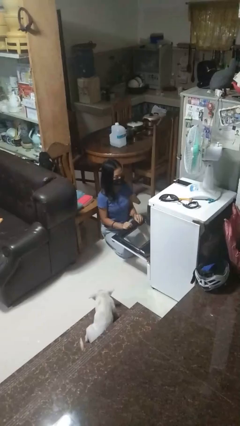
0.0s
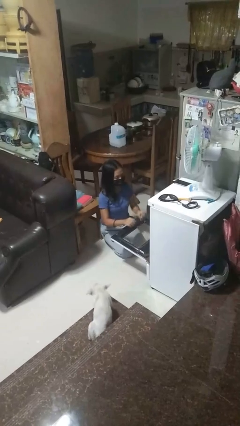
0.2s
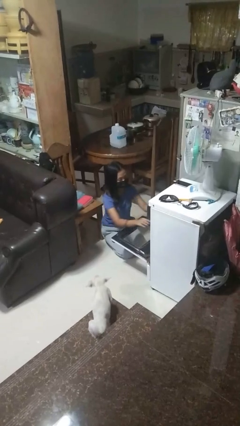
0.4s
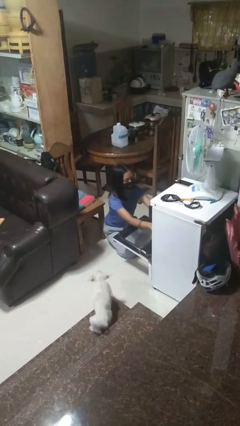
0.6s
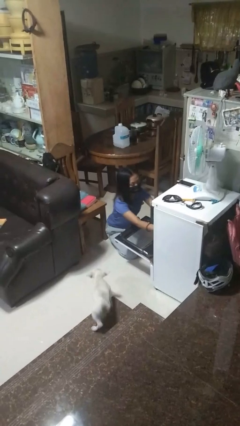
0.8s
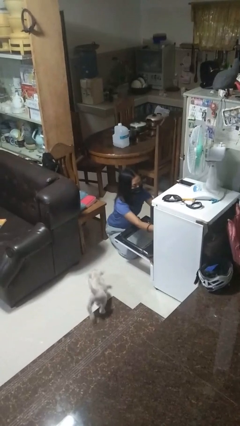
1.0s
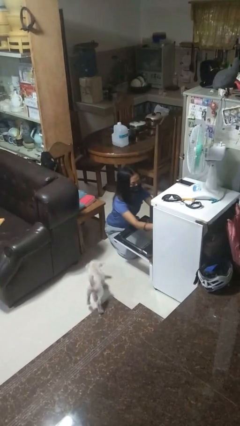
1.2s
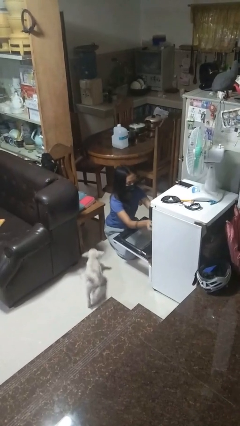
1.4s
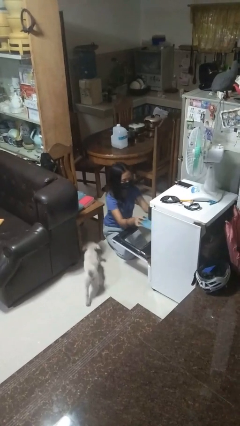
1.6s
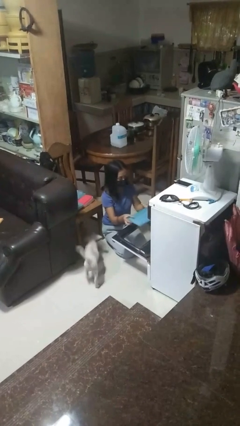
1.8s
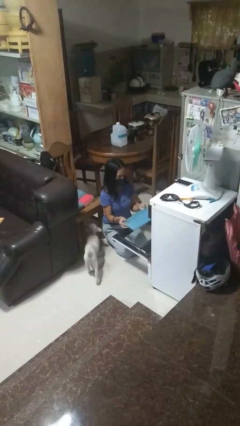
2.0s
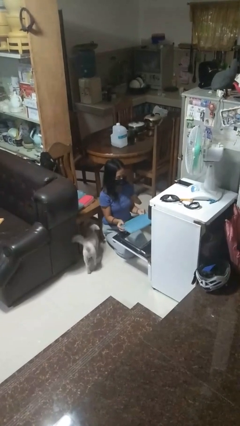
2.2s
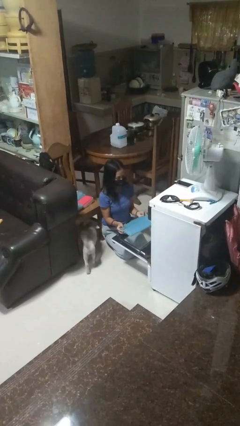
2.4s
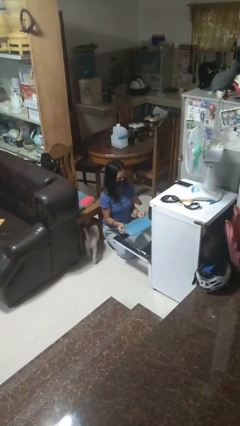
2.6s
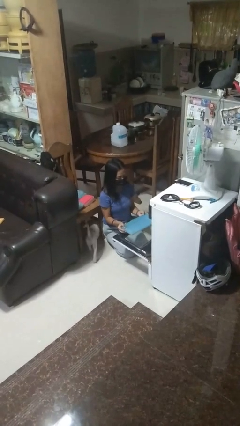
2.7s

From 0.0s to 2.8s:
person takes object from oven

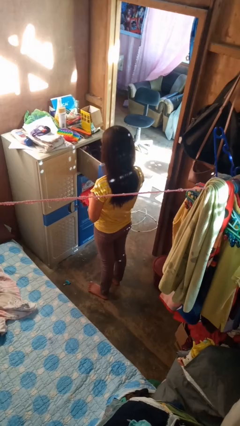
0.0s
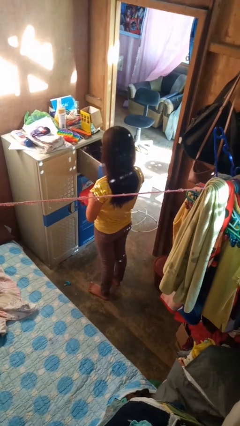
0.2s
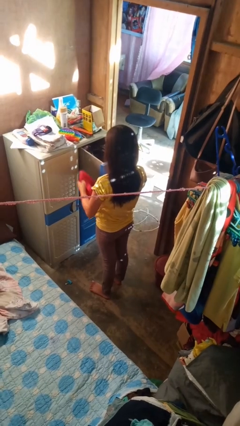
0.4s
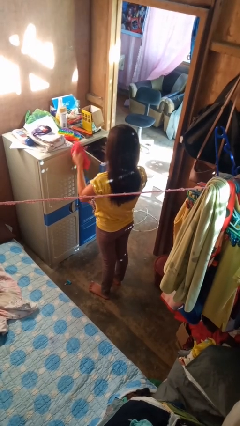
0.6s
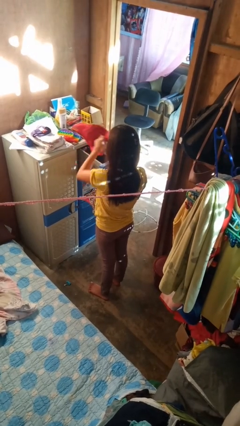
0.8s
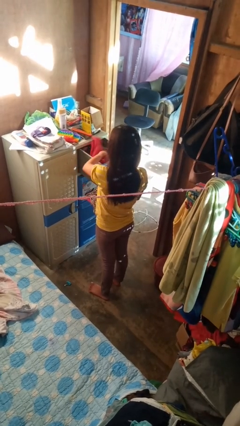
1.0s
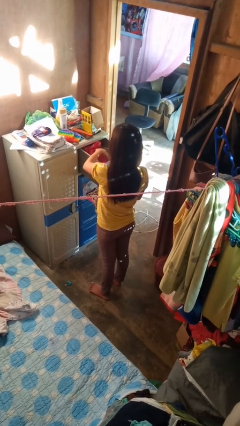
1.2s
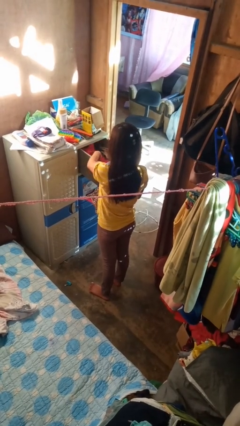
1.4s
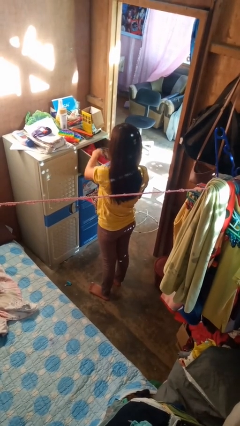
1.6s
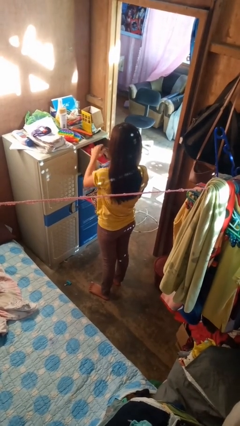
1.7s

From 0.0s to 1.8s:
person puts clothes into dresser

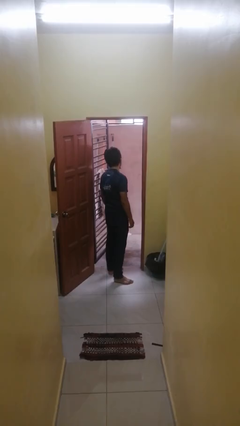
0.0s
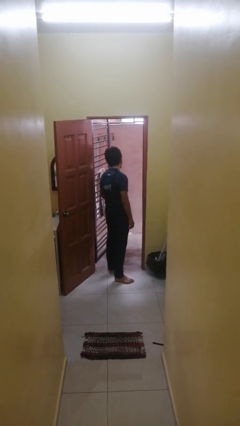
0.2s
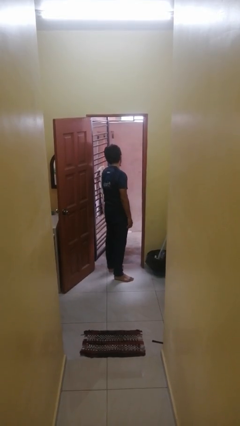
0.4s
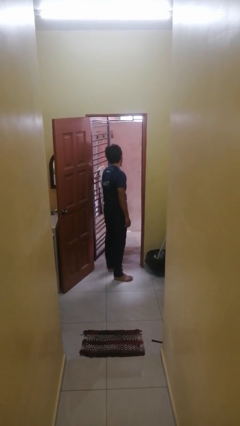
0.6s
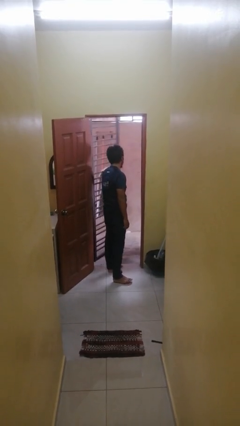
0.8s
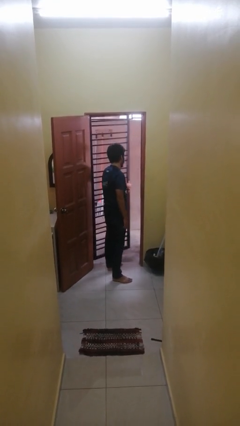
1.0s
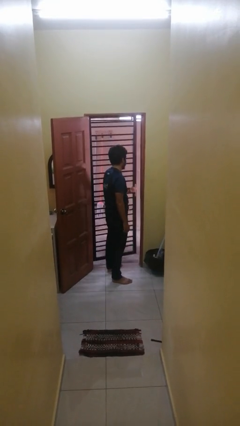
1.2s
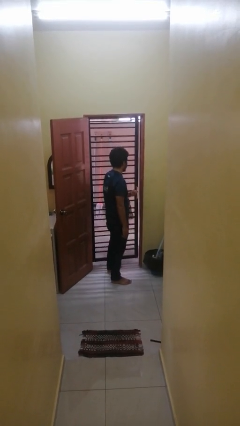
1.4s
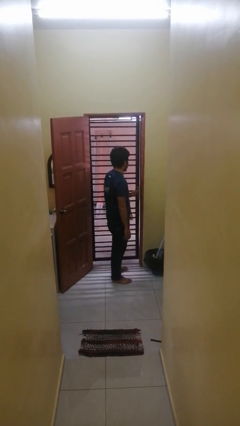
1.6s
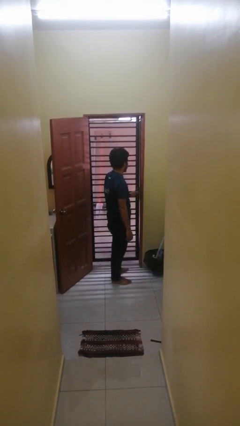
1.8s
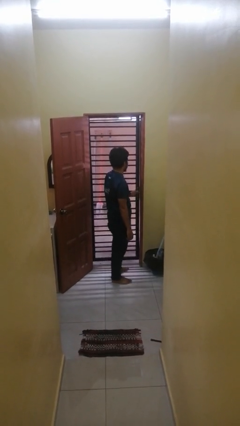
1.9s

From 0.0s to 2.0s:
person closes gate

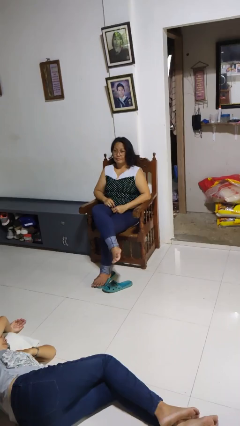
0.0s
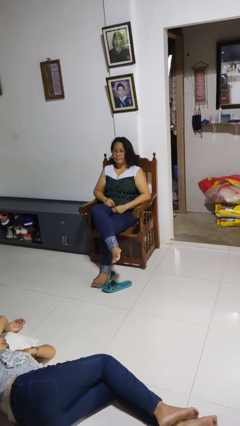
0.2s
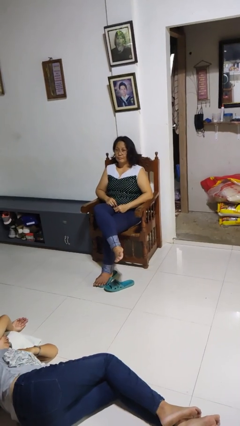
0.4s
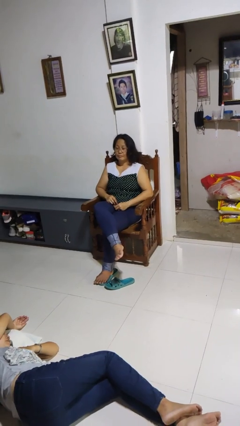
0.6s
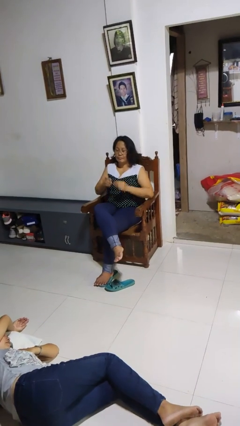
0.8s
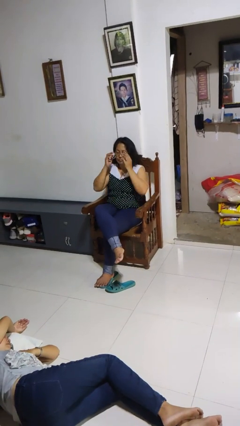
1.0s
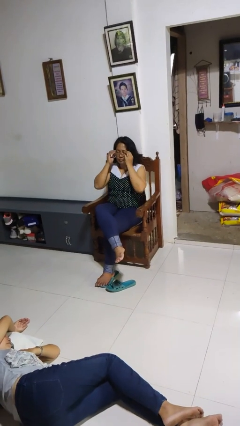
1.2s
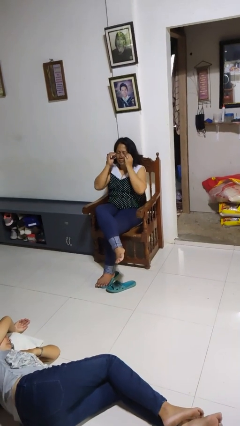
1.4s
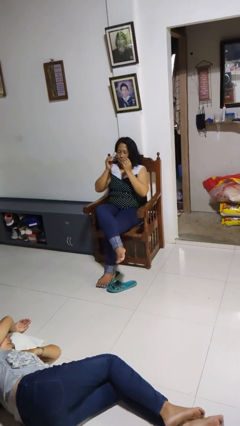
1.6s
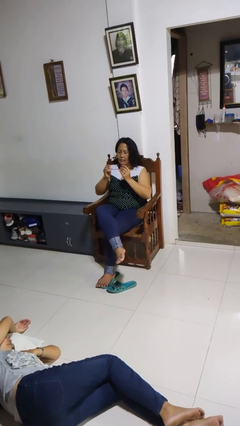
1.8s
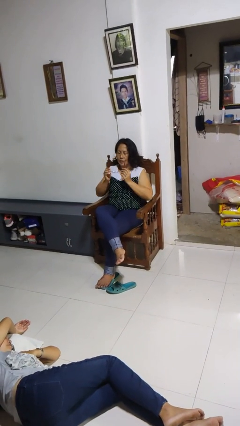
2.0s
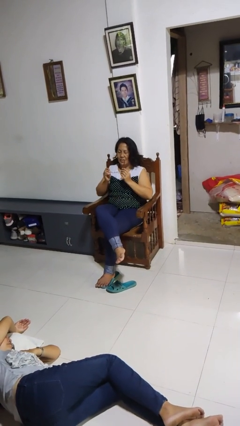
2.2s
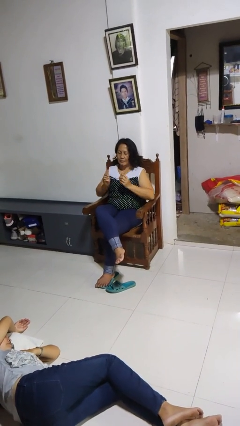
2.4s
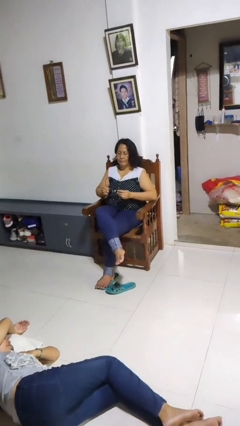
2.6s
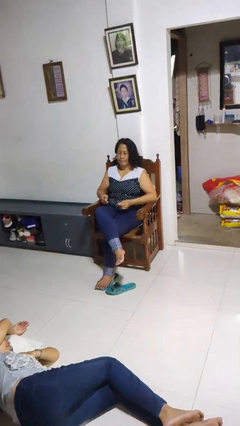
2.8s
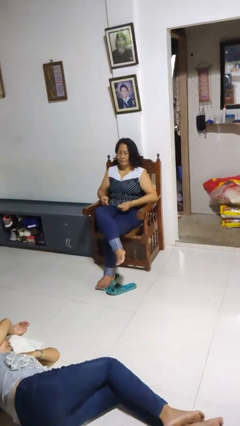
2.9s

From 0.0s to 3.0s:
person takes off glasses

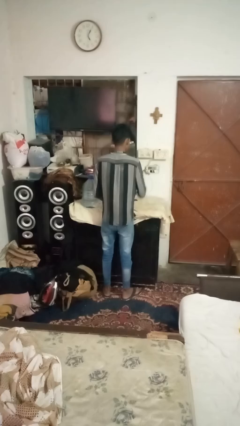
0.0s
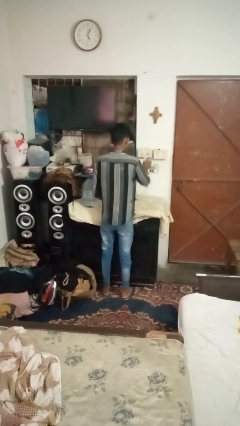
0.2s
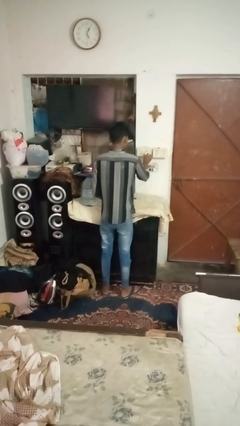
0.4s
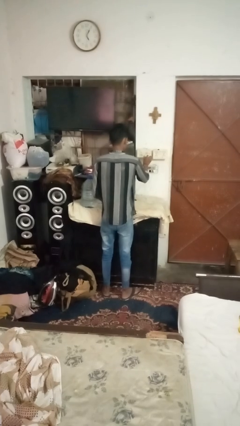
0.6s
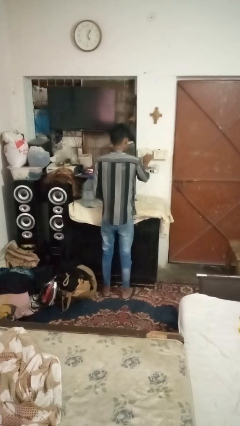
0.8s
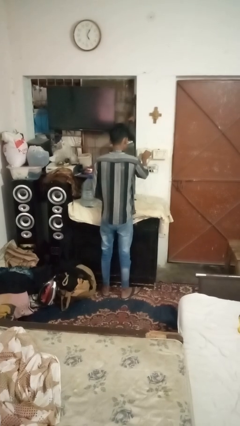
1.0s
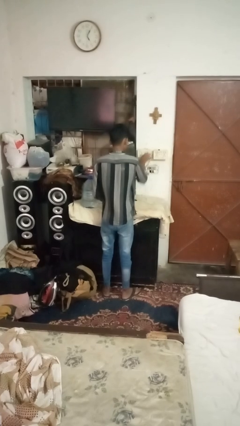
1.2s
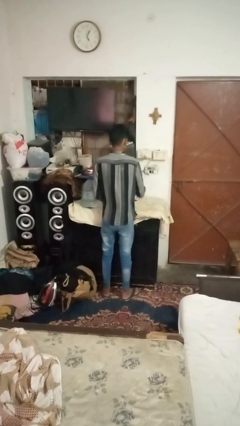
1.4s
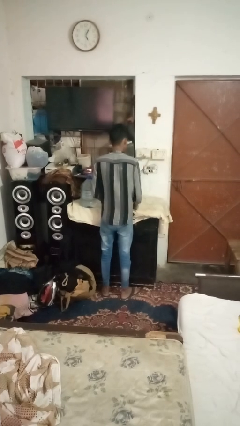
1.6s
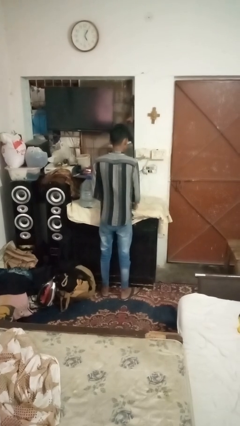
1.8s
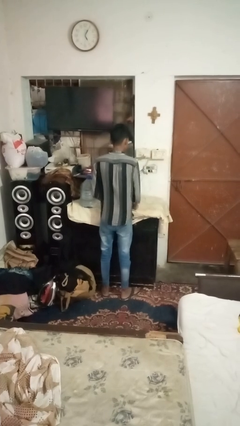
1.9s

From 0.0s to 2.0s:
person plugs into electrical socket

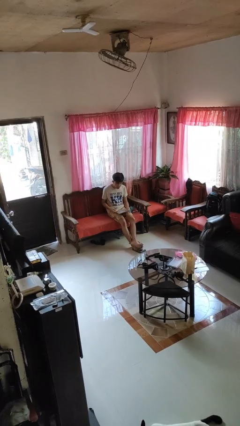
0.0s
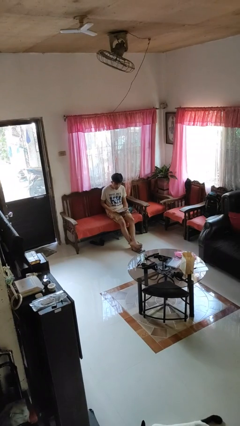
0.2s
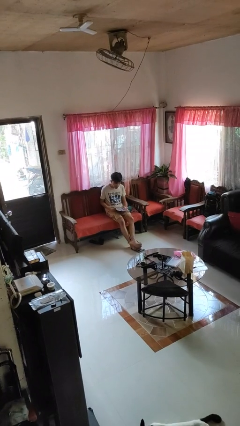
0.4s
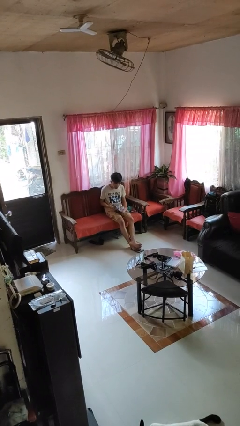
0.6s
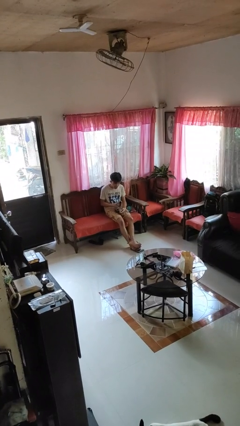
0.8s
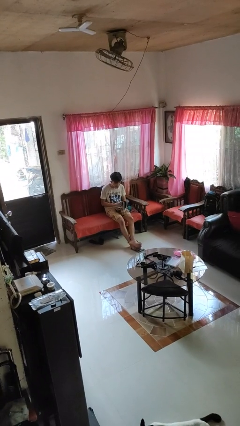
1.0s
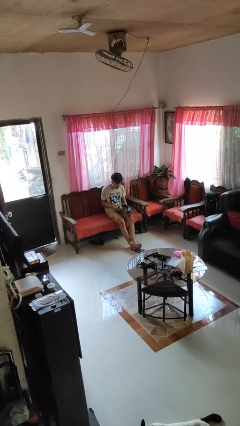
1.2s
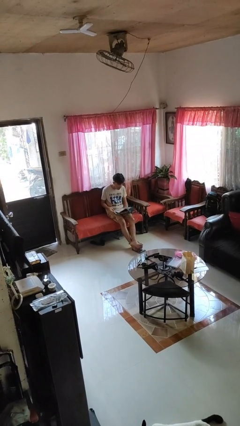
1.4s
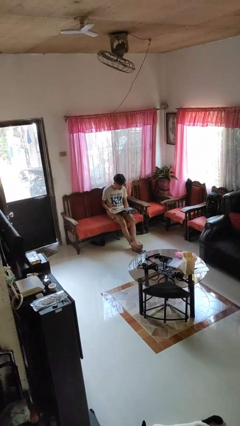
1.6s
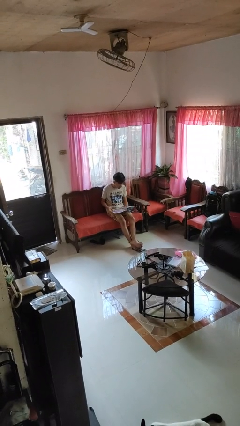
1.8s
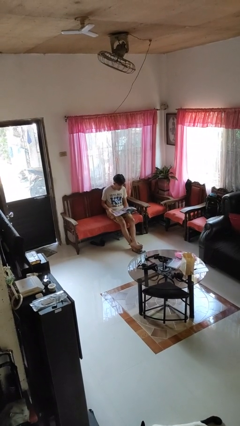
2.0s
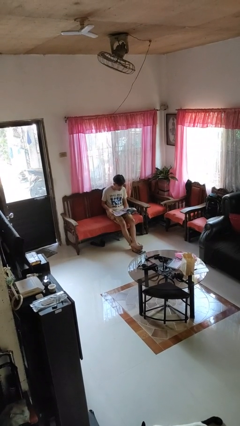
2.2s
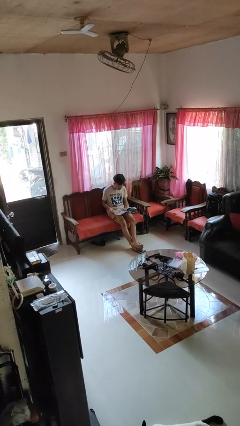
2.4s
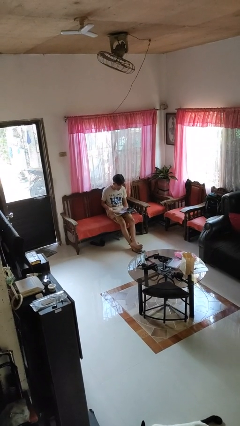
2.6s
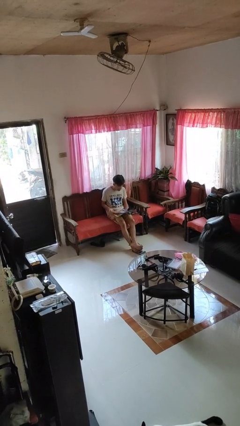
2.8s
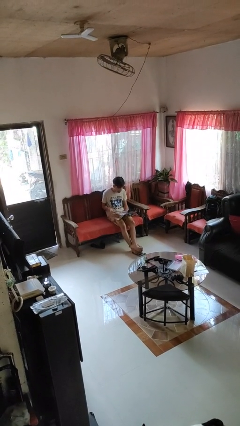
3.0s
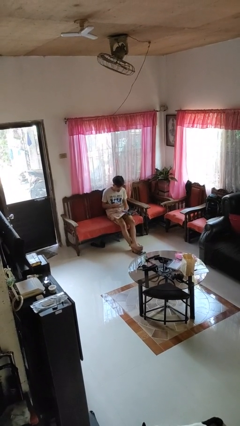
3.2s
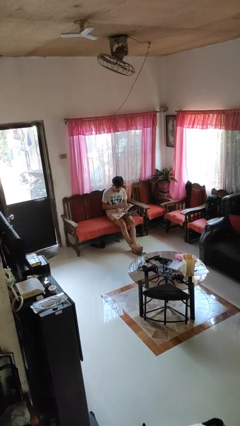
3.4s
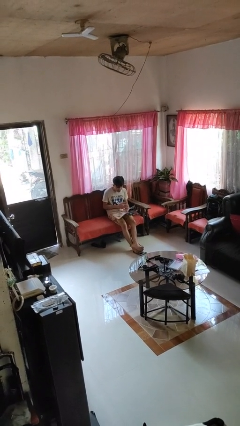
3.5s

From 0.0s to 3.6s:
person reads magazine

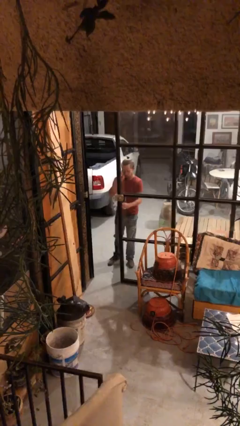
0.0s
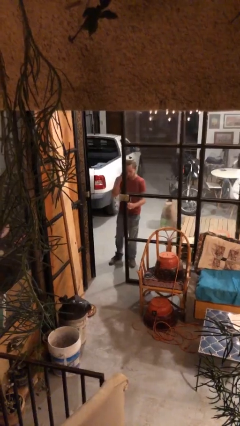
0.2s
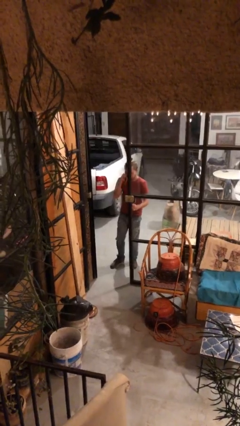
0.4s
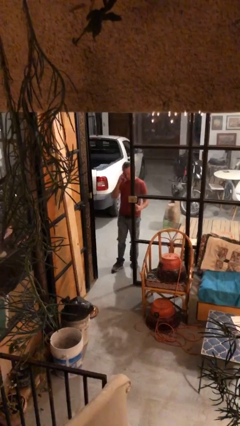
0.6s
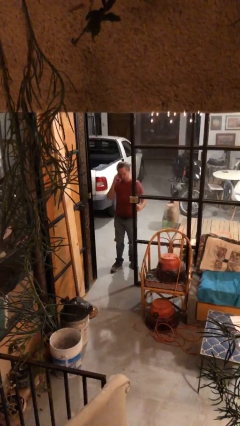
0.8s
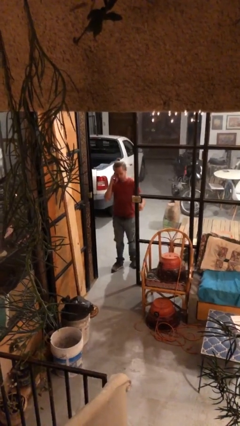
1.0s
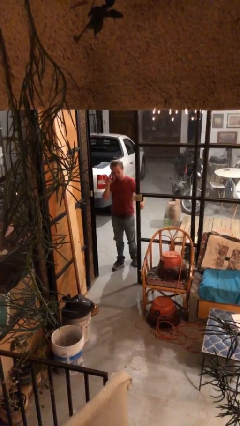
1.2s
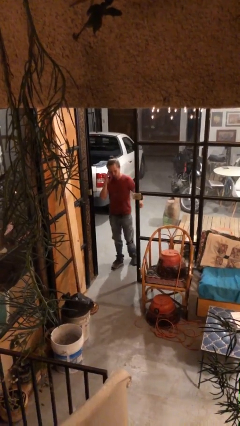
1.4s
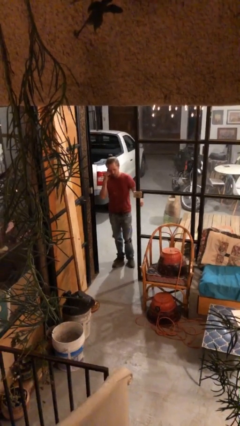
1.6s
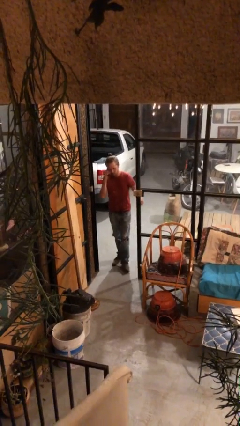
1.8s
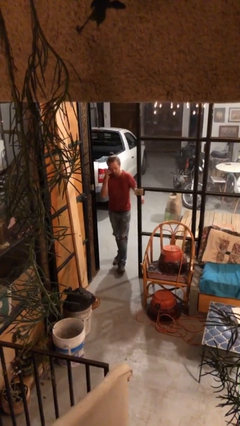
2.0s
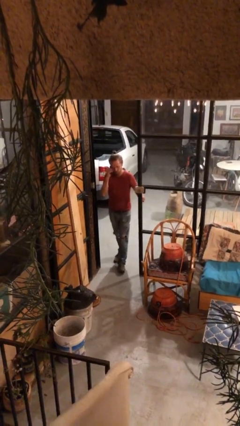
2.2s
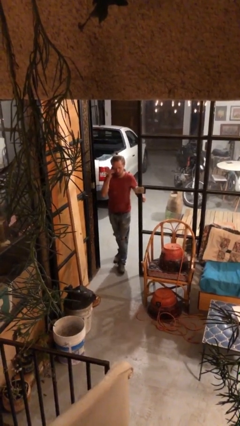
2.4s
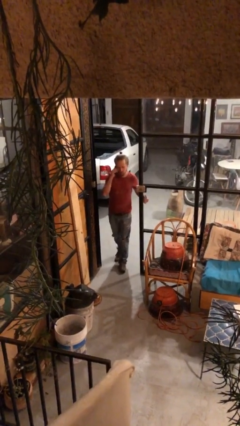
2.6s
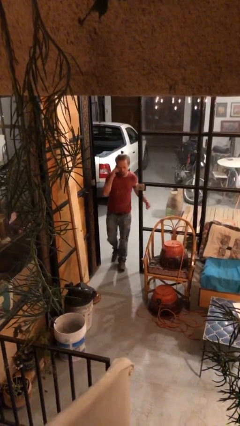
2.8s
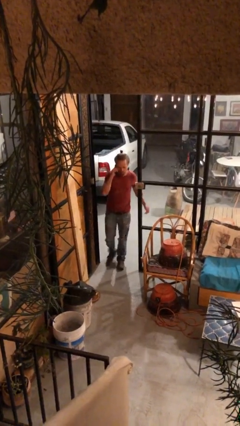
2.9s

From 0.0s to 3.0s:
person enters scene through structure
